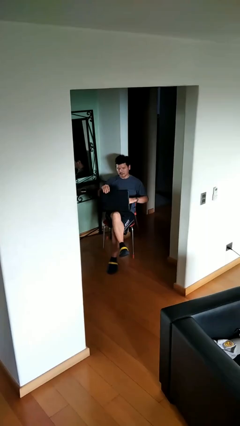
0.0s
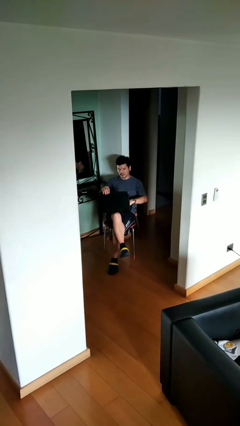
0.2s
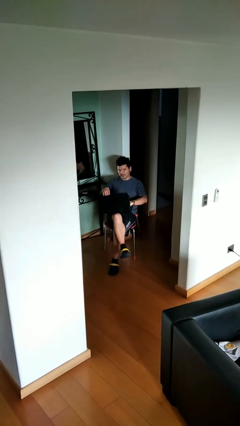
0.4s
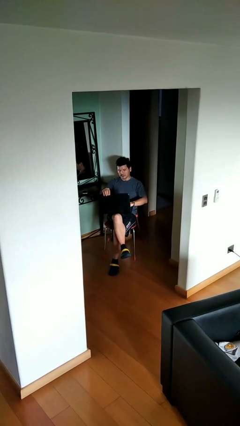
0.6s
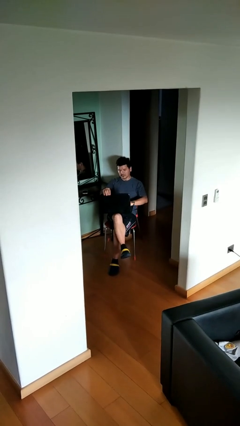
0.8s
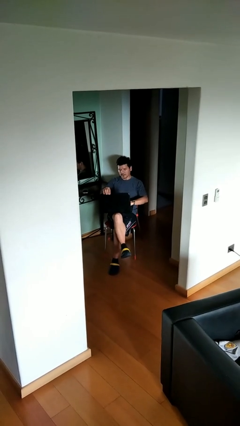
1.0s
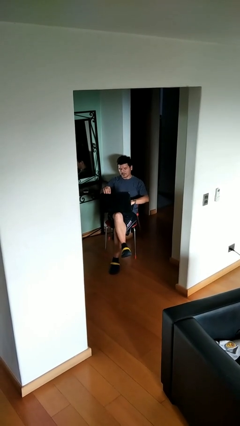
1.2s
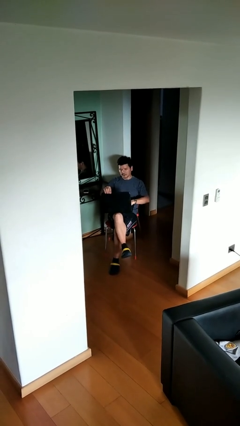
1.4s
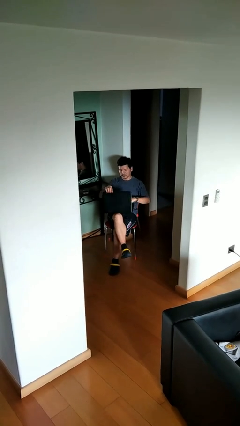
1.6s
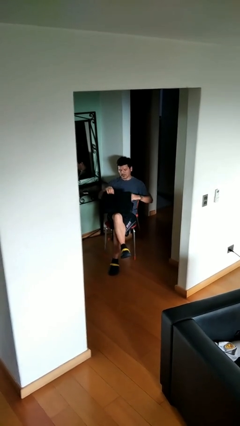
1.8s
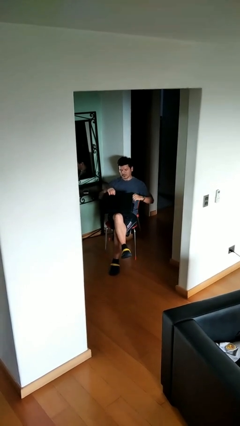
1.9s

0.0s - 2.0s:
person interacts with laptop

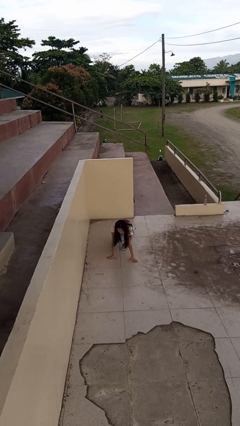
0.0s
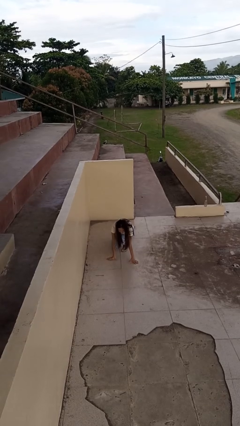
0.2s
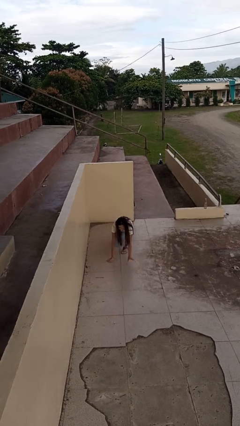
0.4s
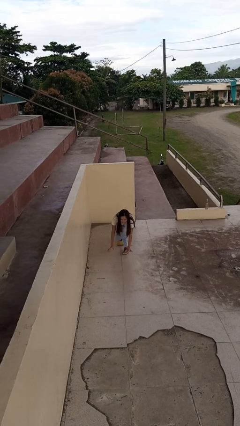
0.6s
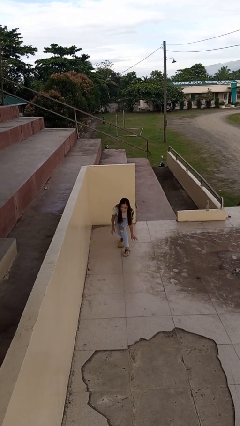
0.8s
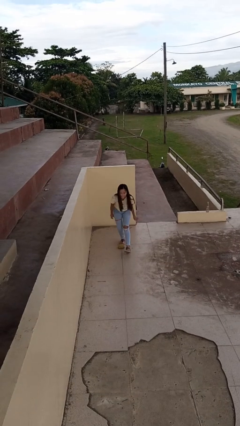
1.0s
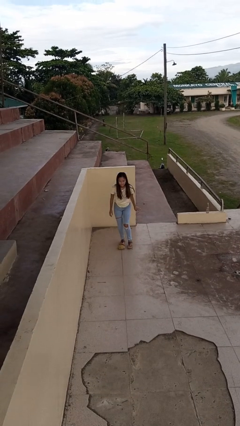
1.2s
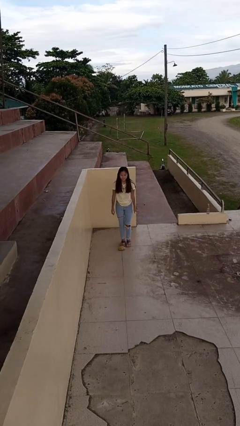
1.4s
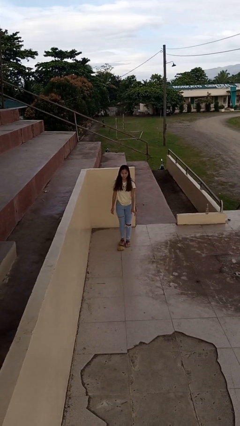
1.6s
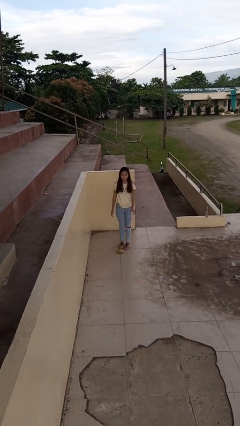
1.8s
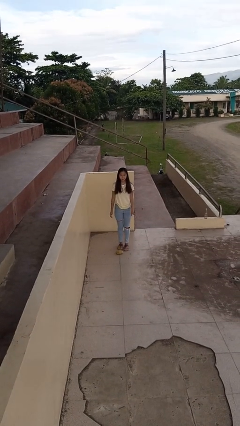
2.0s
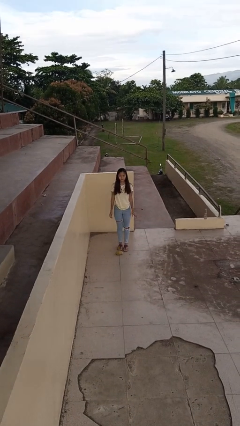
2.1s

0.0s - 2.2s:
person stands up from floor

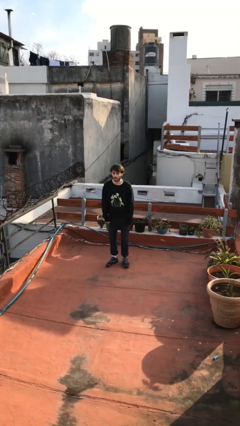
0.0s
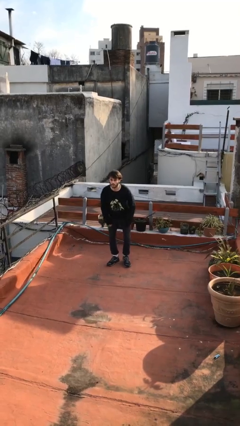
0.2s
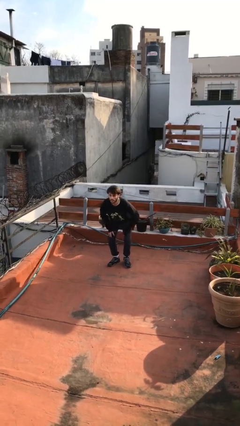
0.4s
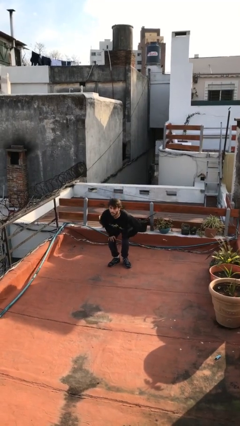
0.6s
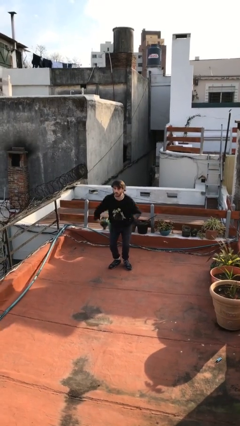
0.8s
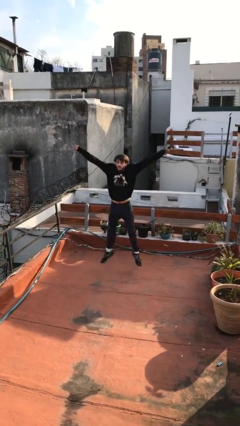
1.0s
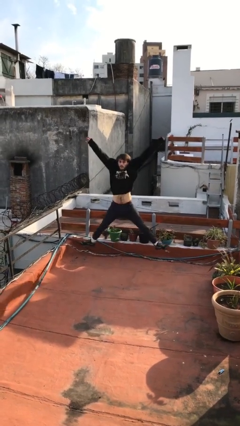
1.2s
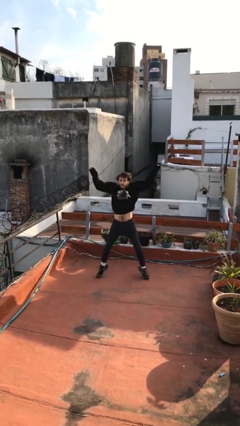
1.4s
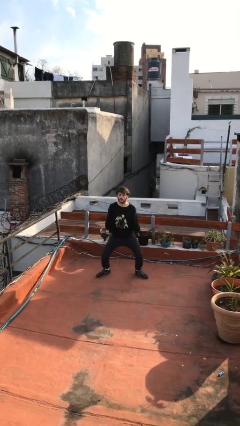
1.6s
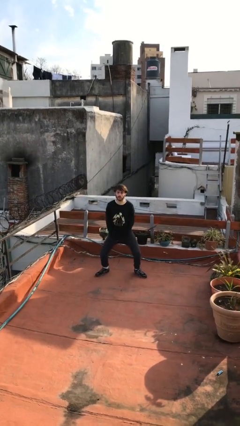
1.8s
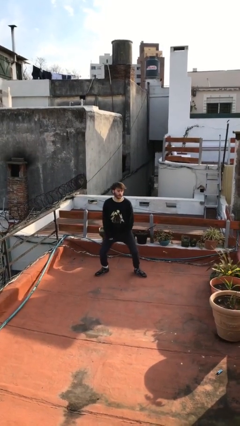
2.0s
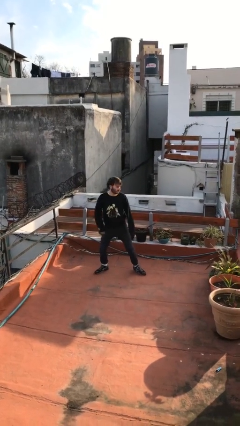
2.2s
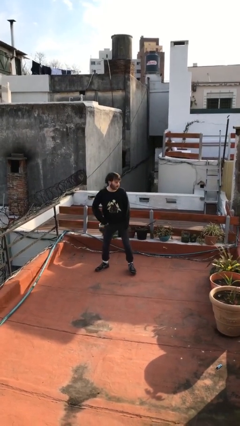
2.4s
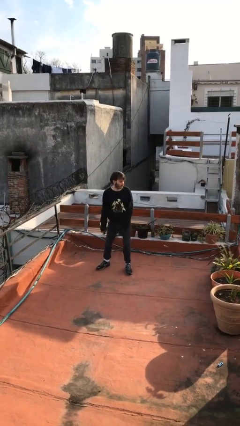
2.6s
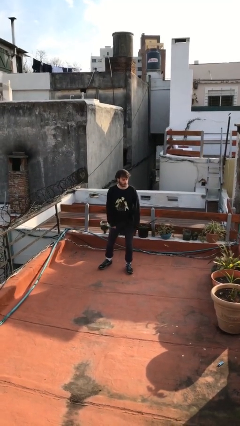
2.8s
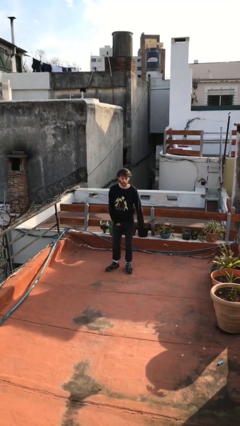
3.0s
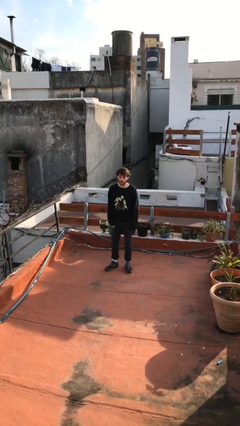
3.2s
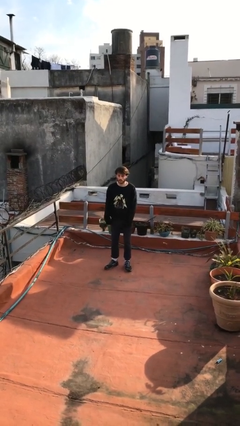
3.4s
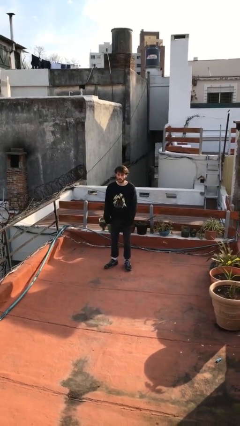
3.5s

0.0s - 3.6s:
person exercises with jumping jacks

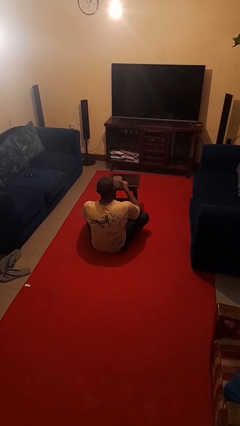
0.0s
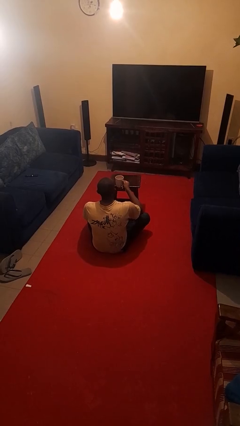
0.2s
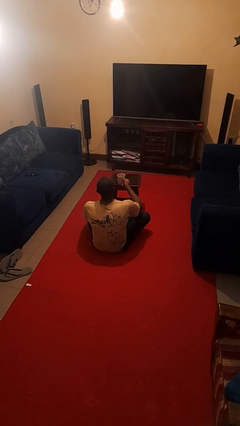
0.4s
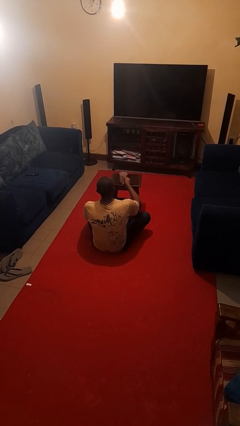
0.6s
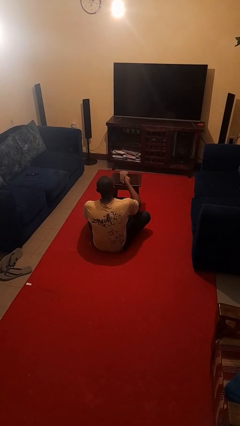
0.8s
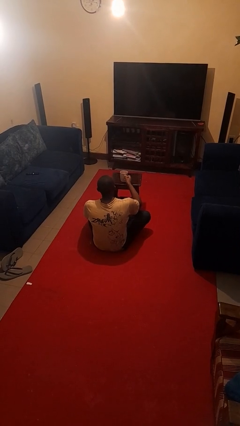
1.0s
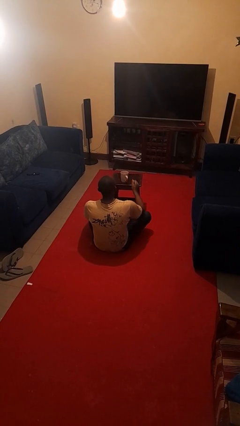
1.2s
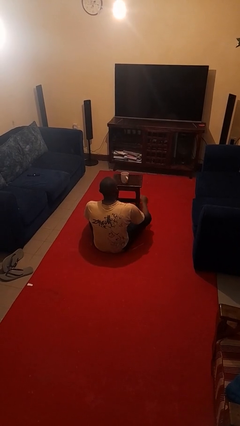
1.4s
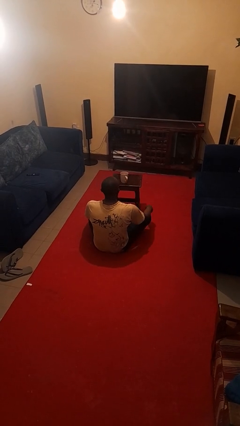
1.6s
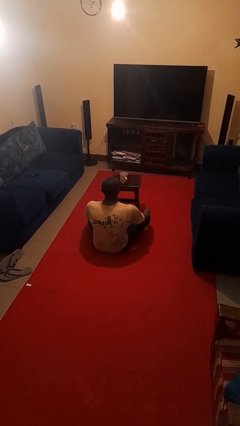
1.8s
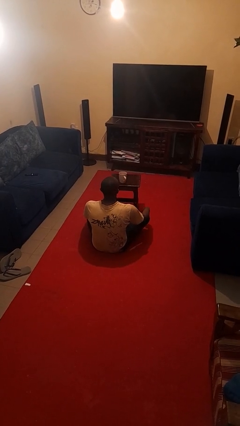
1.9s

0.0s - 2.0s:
person puts down object on table

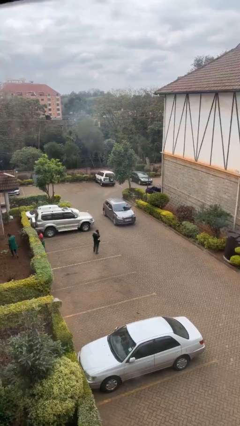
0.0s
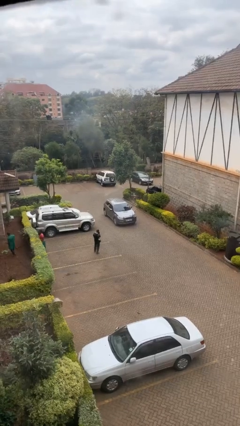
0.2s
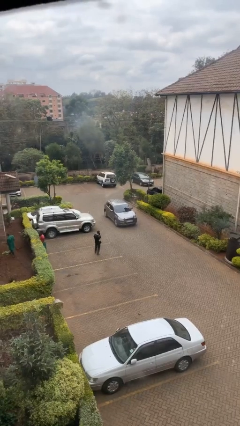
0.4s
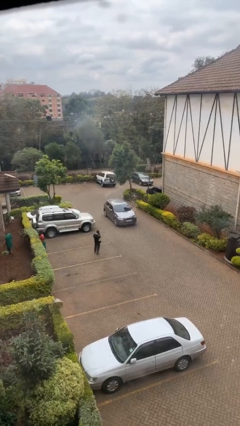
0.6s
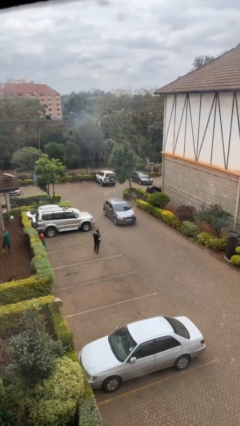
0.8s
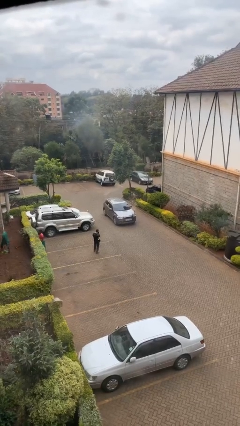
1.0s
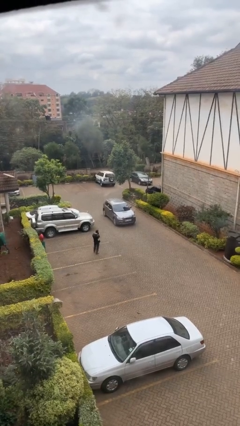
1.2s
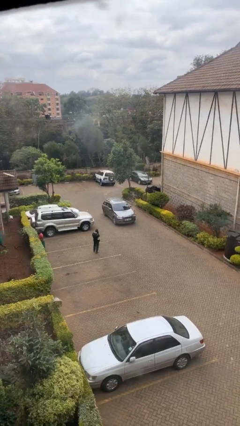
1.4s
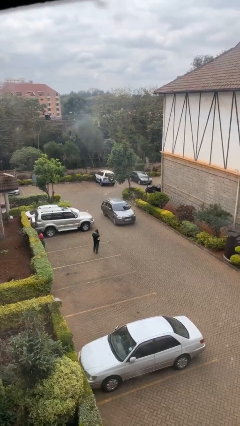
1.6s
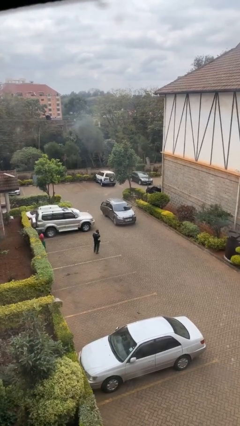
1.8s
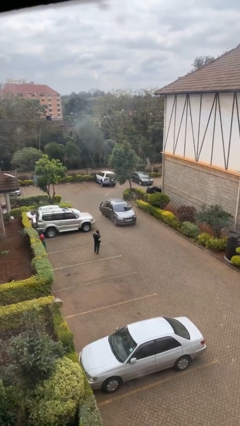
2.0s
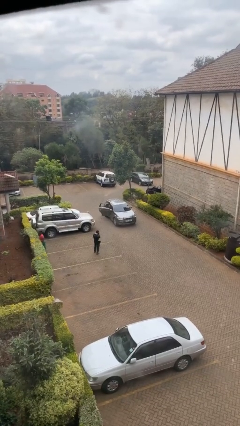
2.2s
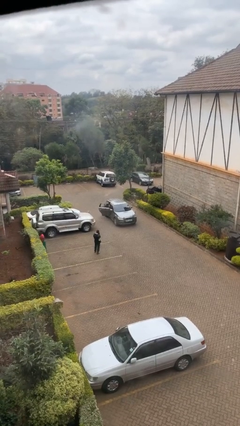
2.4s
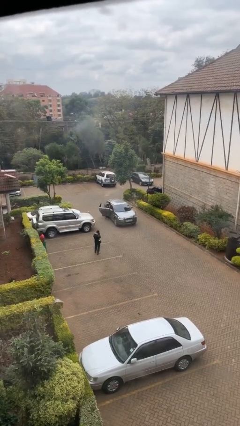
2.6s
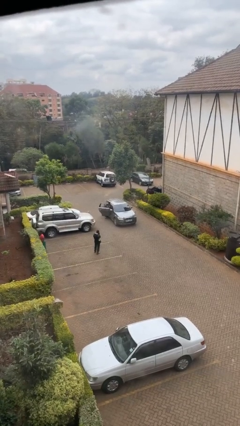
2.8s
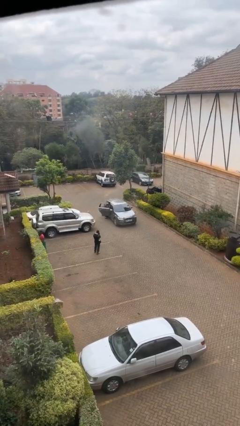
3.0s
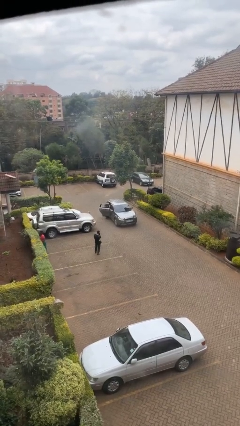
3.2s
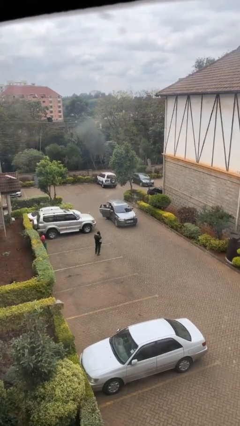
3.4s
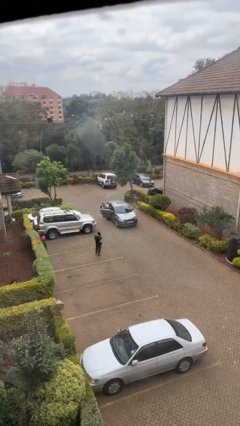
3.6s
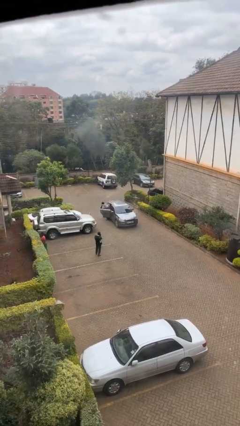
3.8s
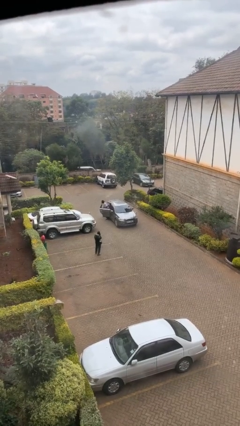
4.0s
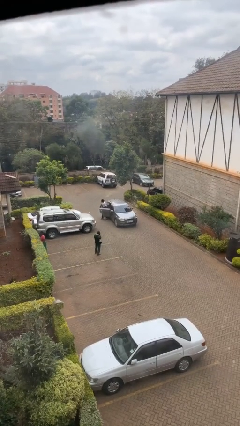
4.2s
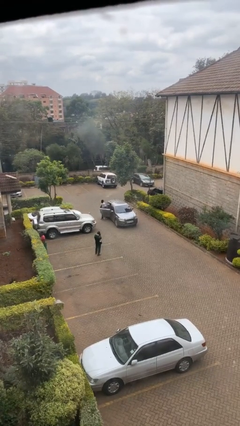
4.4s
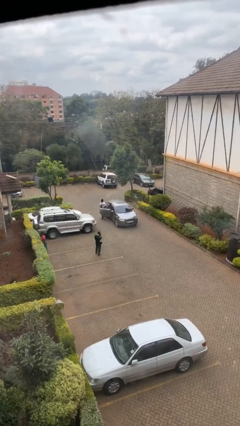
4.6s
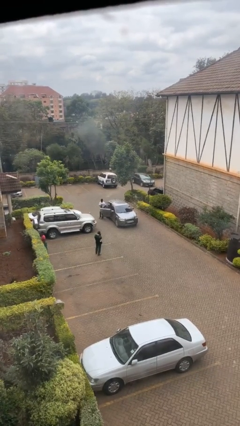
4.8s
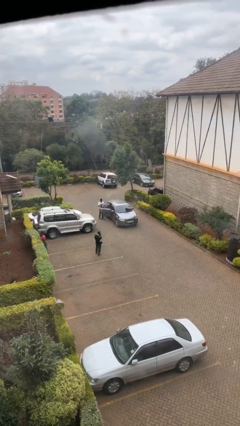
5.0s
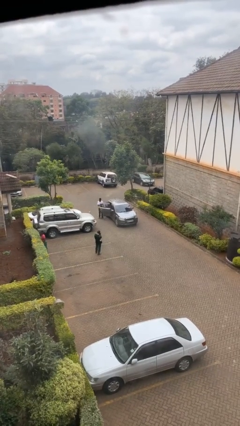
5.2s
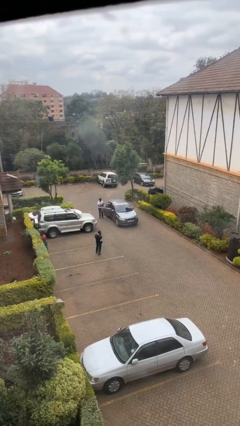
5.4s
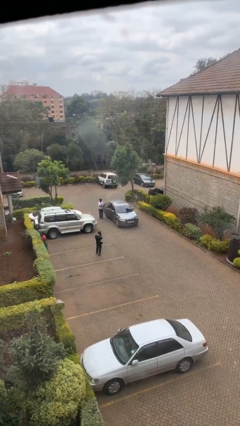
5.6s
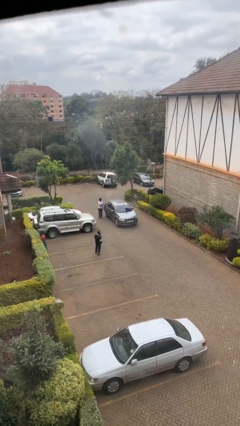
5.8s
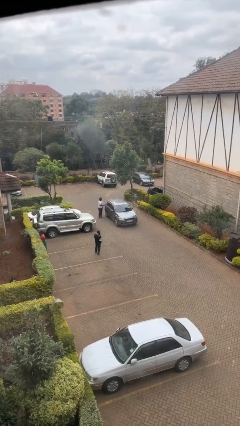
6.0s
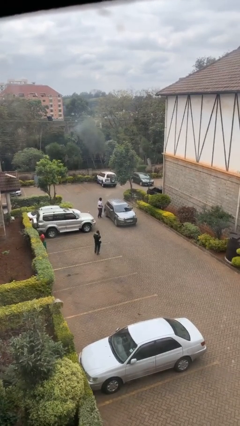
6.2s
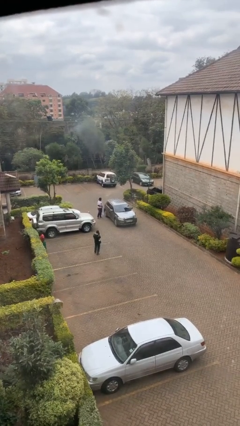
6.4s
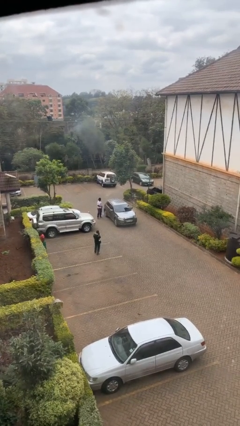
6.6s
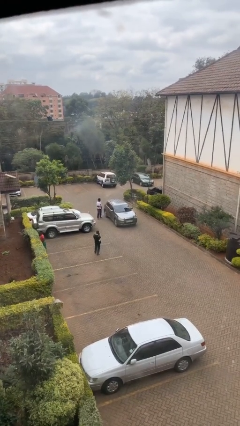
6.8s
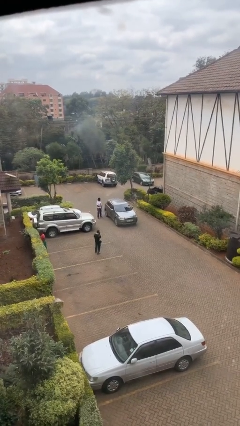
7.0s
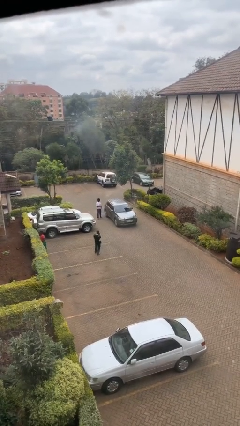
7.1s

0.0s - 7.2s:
car drops off person

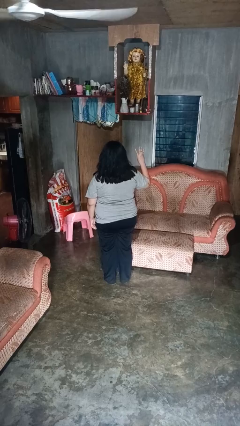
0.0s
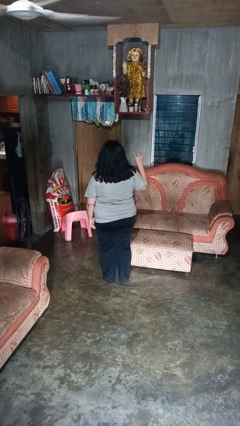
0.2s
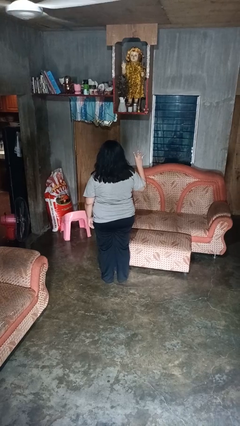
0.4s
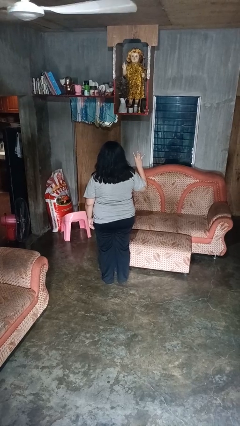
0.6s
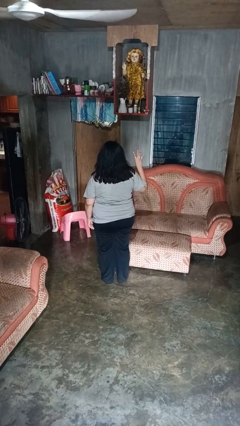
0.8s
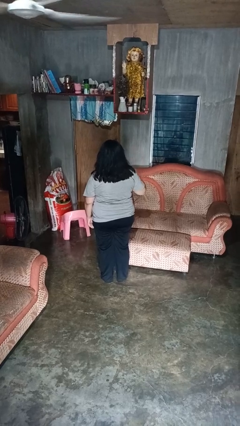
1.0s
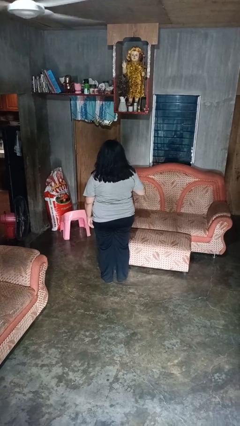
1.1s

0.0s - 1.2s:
person gestures number four
